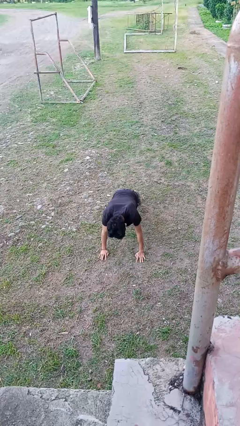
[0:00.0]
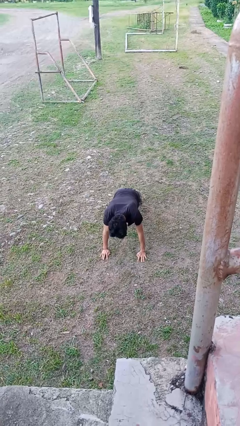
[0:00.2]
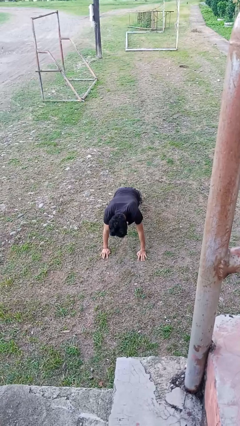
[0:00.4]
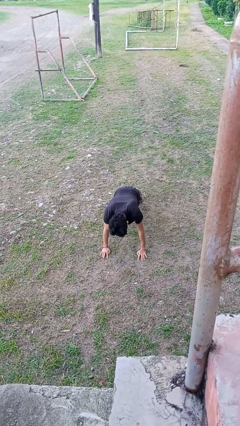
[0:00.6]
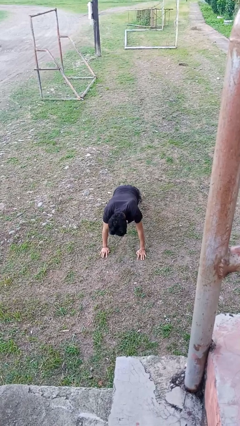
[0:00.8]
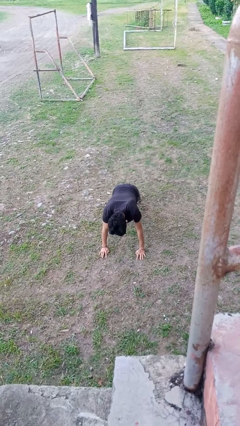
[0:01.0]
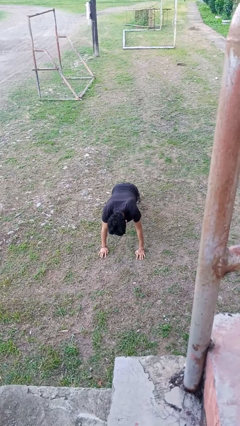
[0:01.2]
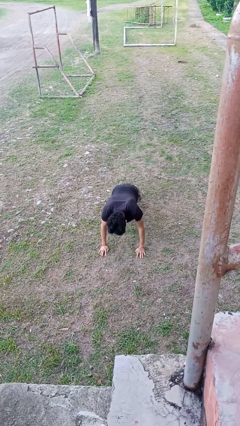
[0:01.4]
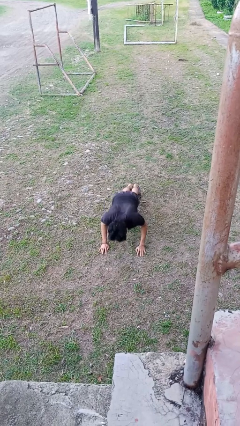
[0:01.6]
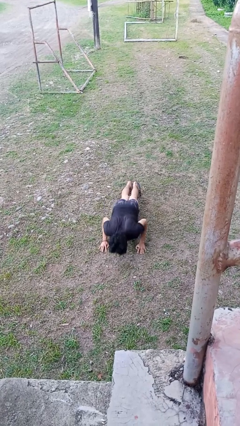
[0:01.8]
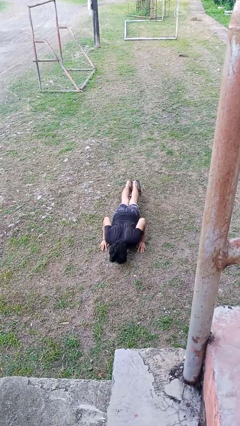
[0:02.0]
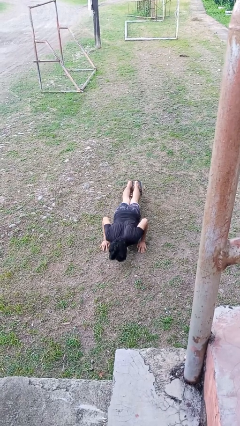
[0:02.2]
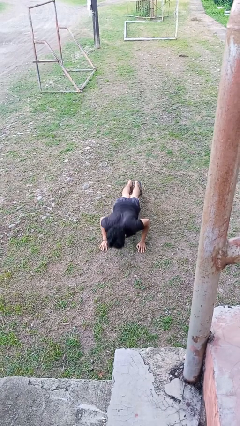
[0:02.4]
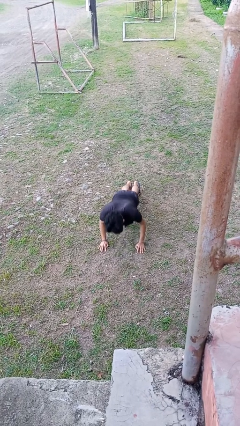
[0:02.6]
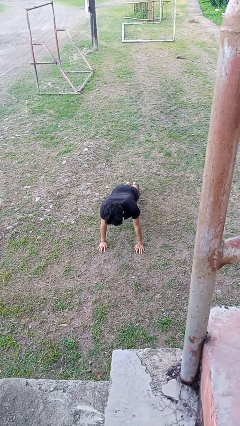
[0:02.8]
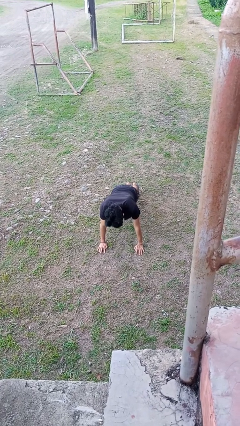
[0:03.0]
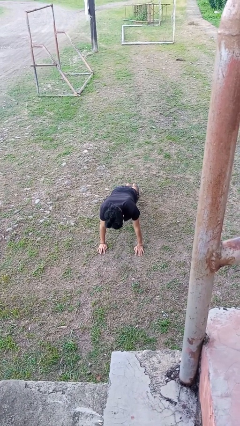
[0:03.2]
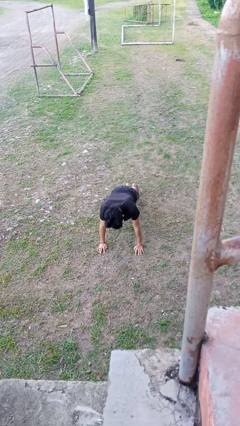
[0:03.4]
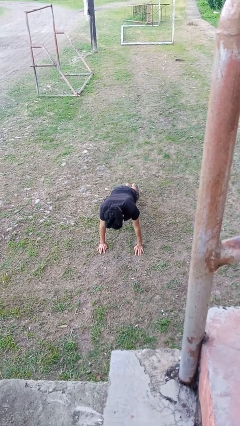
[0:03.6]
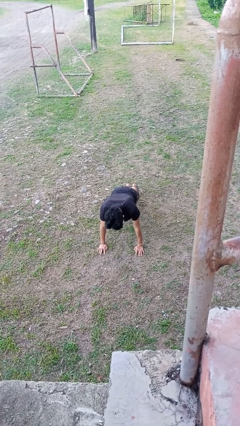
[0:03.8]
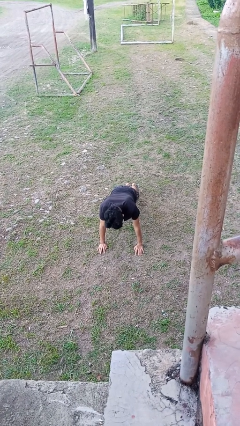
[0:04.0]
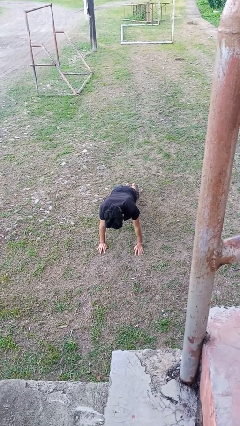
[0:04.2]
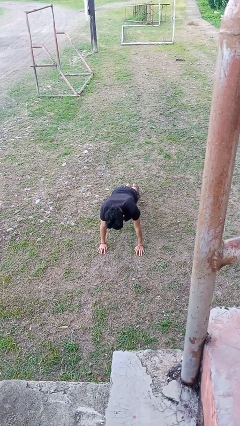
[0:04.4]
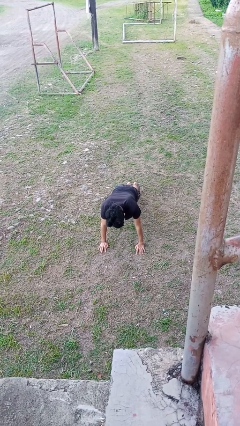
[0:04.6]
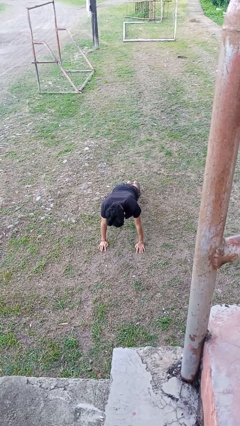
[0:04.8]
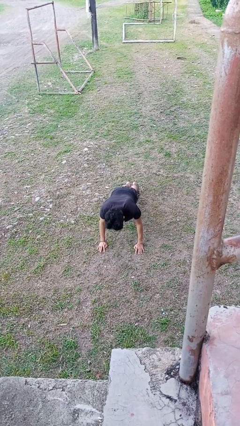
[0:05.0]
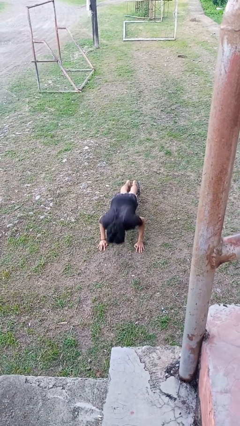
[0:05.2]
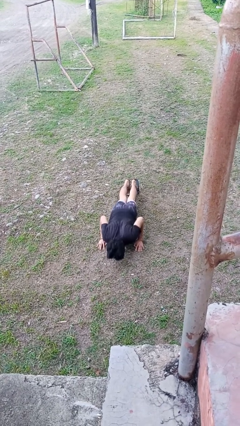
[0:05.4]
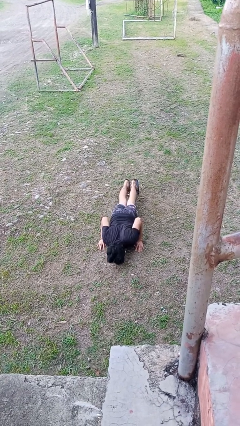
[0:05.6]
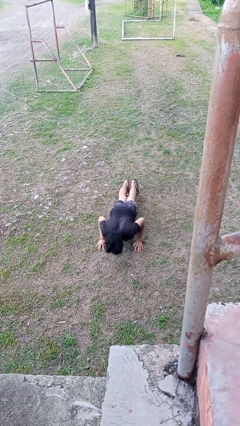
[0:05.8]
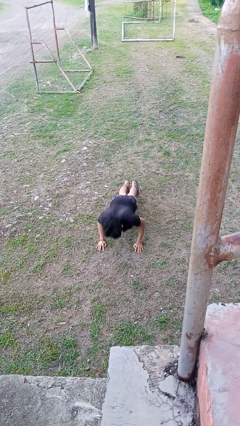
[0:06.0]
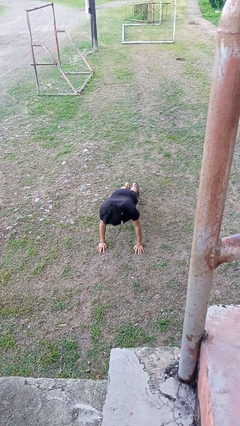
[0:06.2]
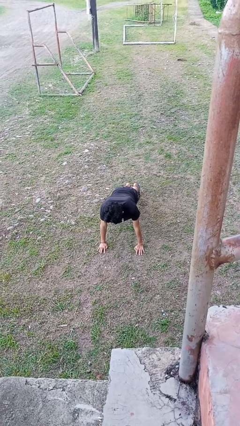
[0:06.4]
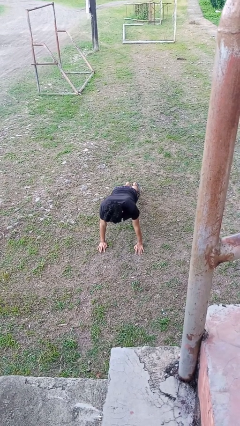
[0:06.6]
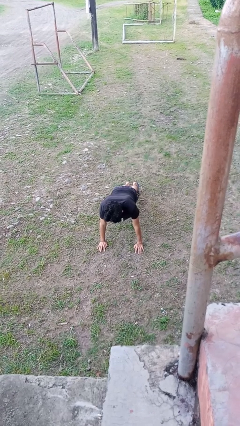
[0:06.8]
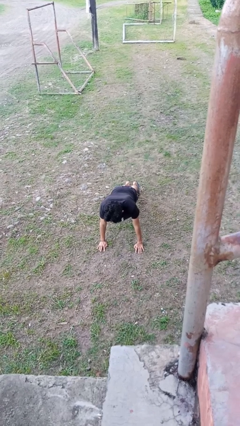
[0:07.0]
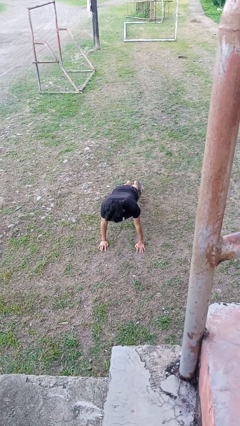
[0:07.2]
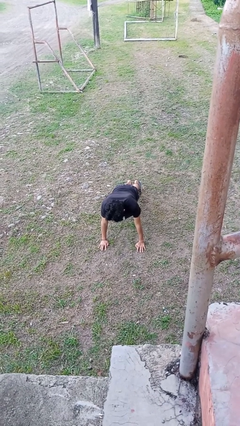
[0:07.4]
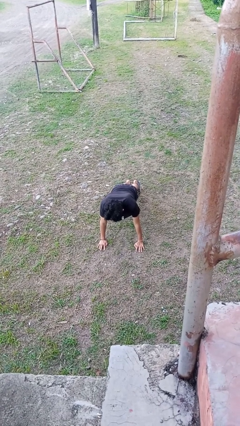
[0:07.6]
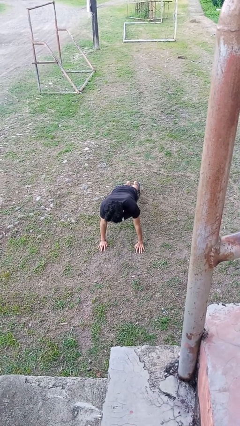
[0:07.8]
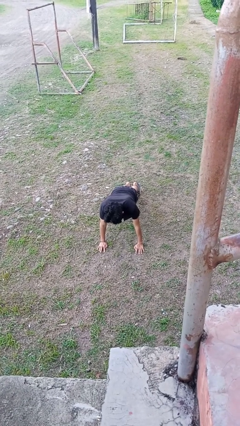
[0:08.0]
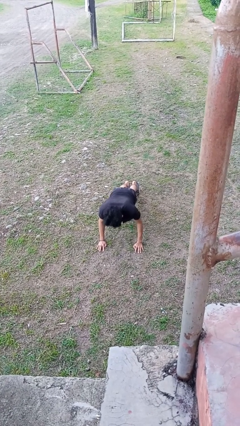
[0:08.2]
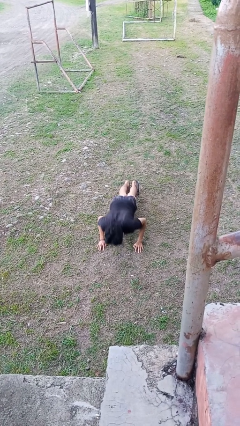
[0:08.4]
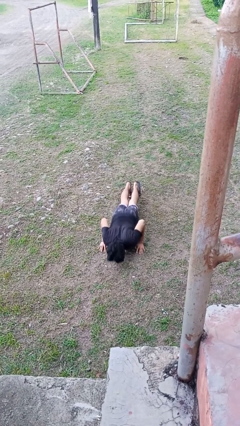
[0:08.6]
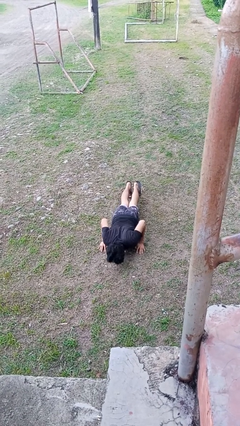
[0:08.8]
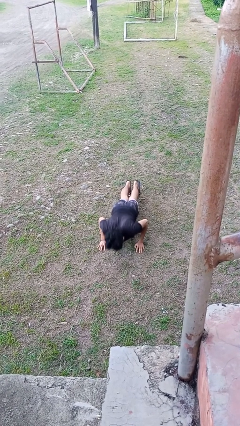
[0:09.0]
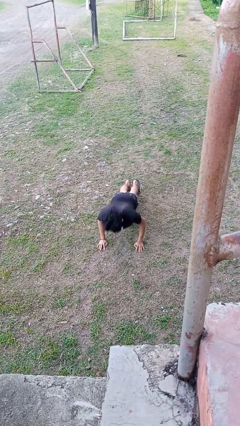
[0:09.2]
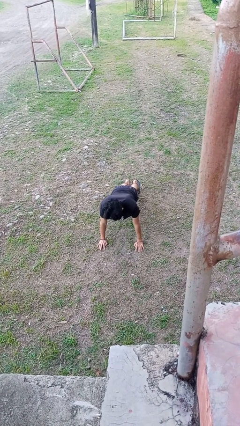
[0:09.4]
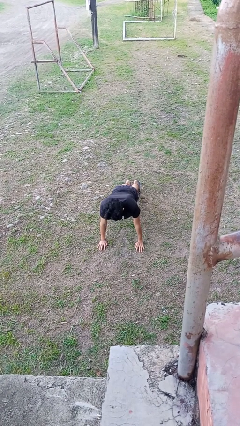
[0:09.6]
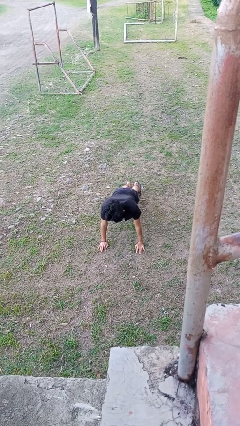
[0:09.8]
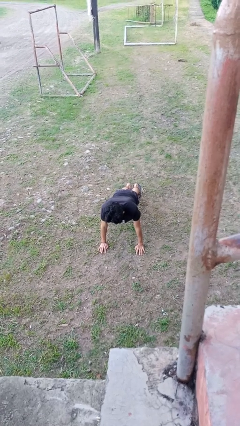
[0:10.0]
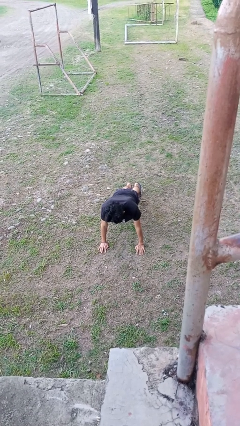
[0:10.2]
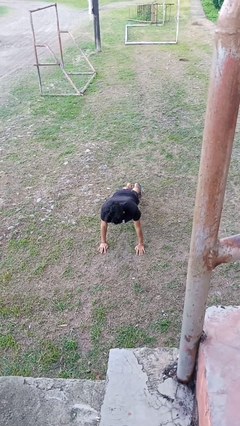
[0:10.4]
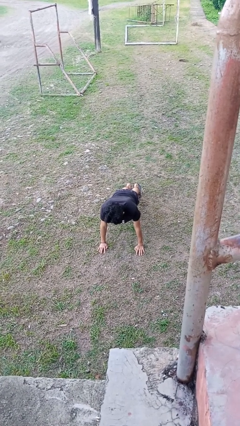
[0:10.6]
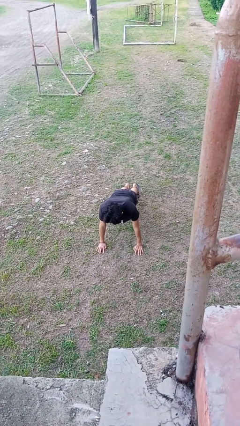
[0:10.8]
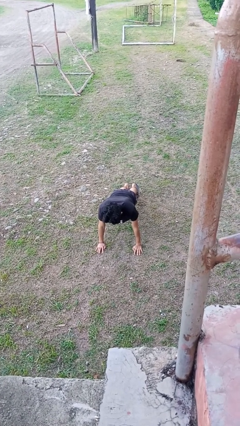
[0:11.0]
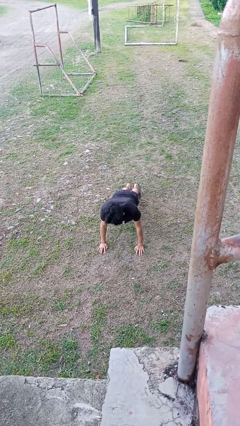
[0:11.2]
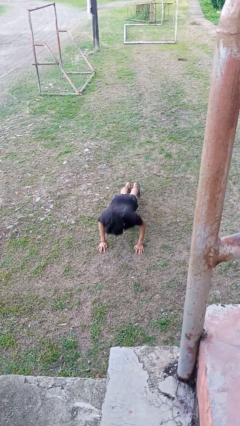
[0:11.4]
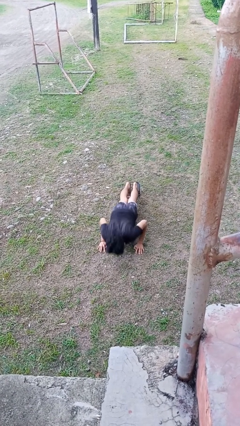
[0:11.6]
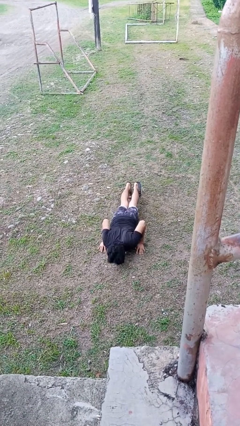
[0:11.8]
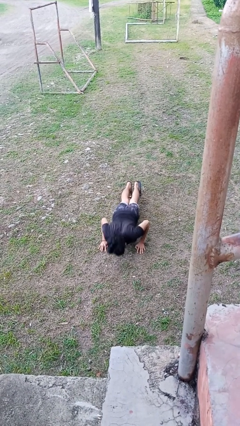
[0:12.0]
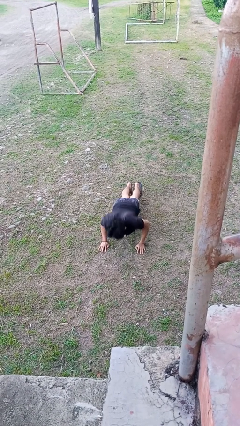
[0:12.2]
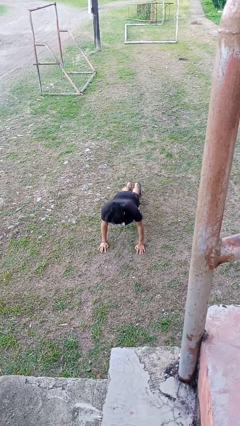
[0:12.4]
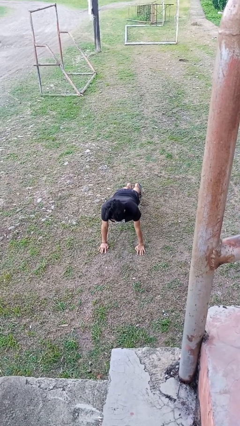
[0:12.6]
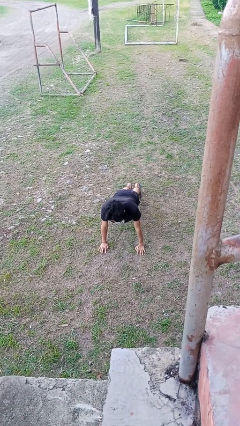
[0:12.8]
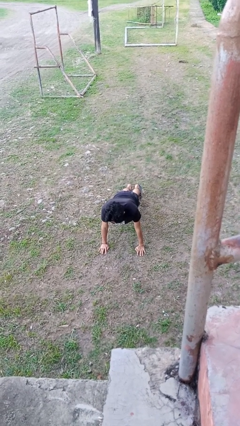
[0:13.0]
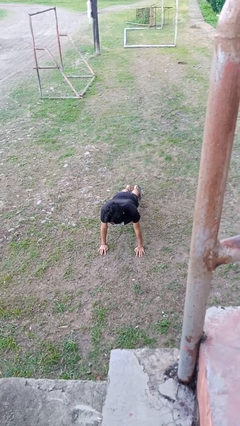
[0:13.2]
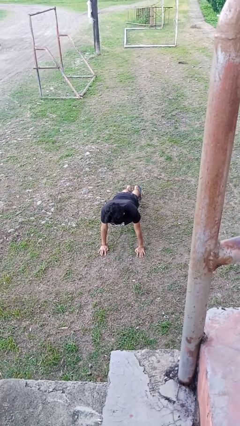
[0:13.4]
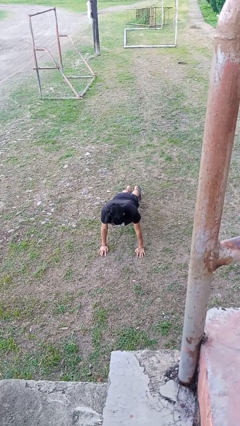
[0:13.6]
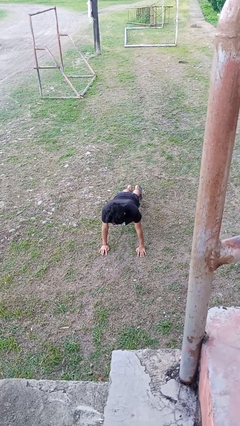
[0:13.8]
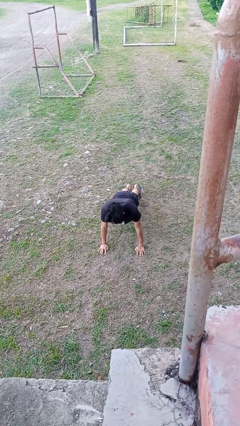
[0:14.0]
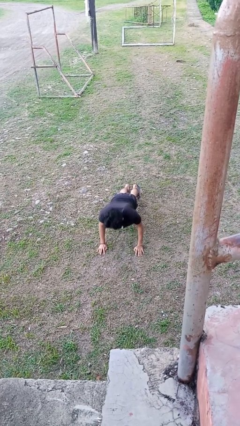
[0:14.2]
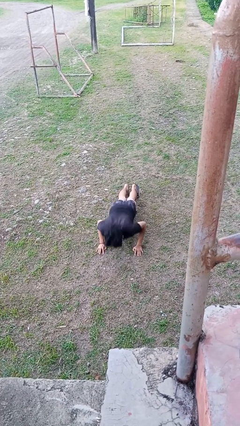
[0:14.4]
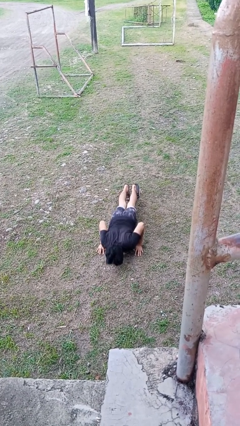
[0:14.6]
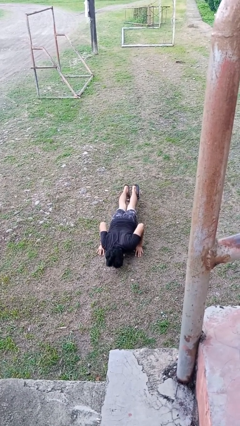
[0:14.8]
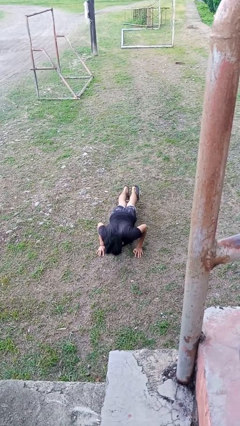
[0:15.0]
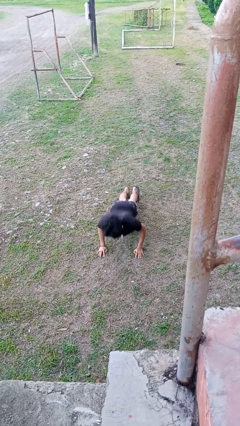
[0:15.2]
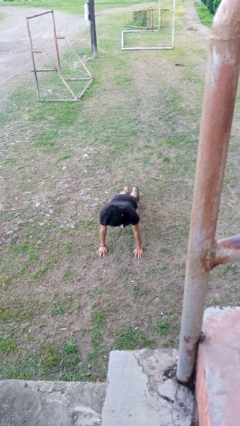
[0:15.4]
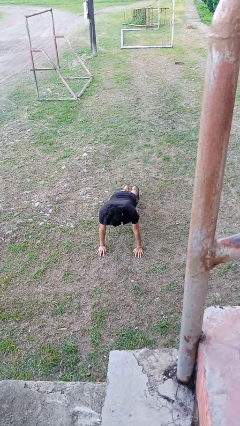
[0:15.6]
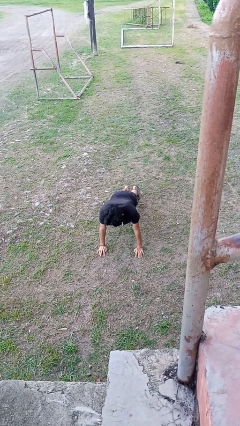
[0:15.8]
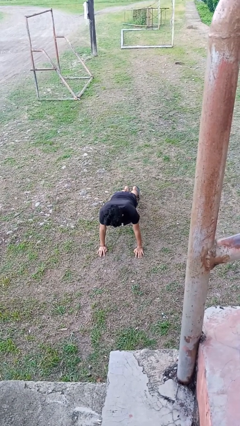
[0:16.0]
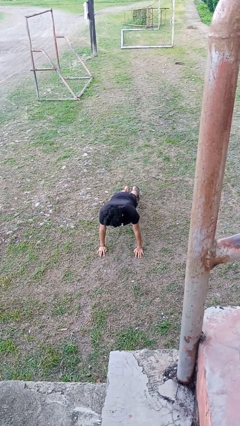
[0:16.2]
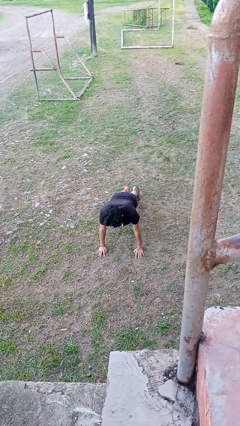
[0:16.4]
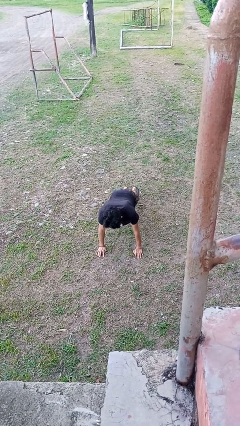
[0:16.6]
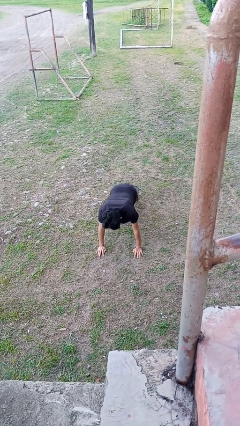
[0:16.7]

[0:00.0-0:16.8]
person exercises with pushup

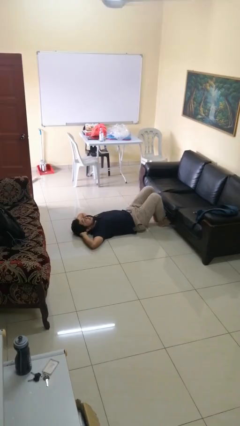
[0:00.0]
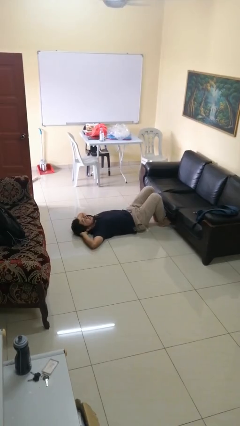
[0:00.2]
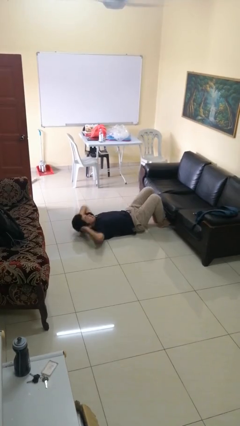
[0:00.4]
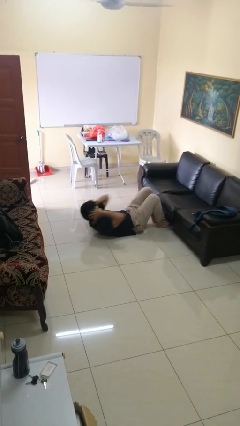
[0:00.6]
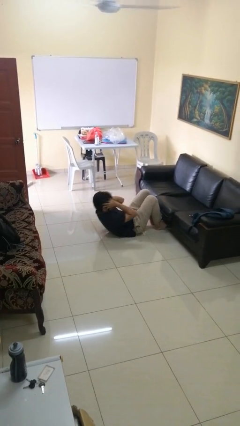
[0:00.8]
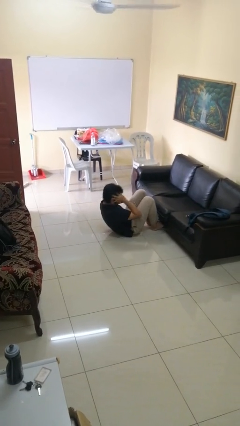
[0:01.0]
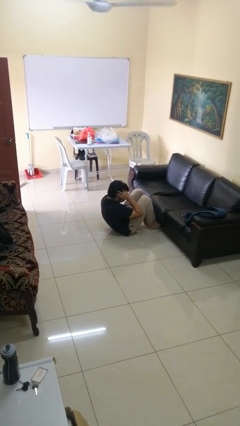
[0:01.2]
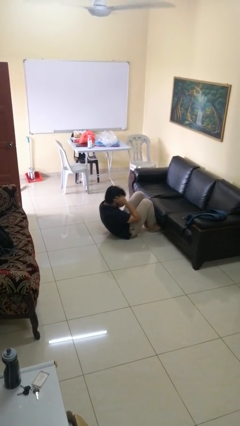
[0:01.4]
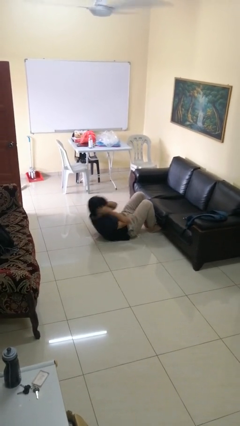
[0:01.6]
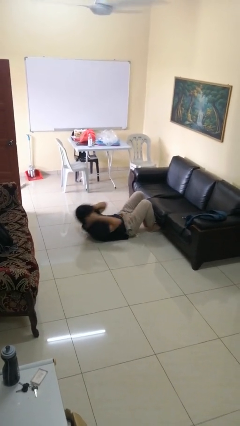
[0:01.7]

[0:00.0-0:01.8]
person exercises with situp
